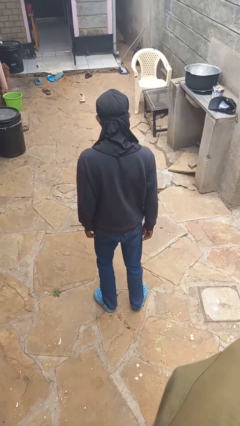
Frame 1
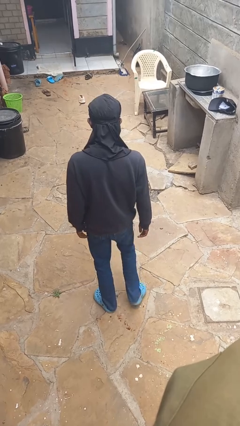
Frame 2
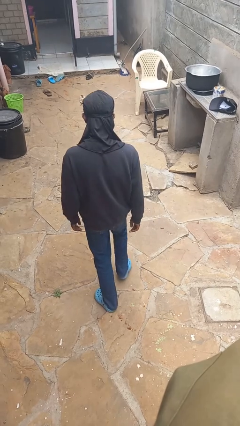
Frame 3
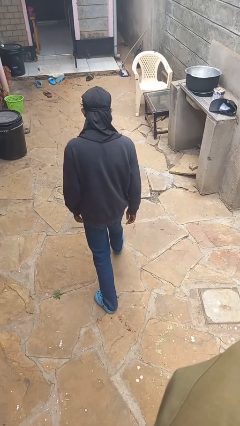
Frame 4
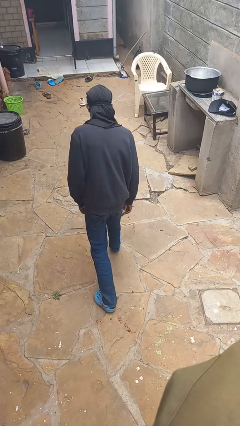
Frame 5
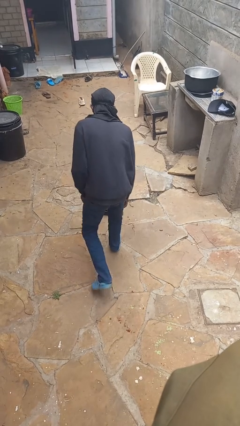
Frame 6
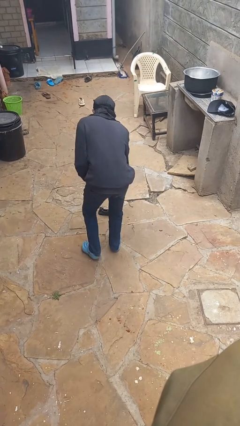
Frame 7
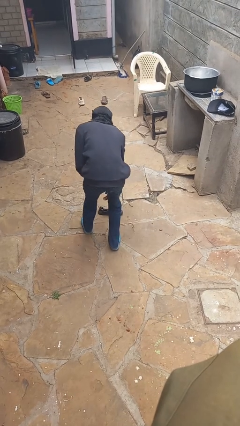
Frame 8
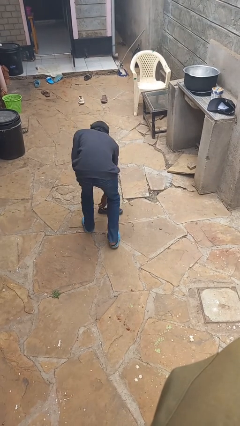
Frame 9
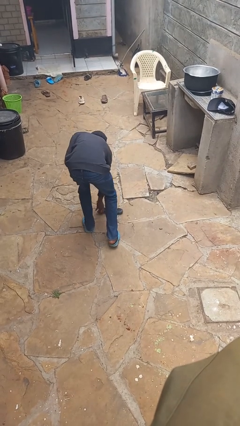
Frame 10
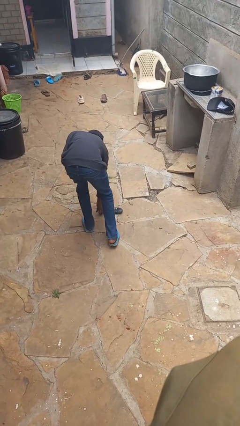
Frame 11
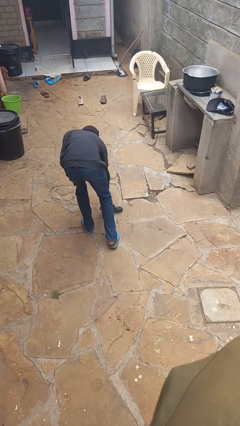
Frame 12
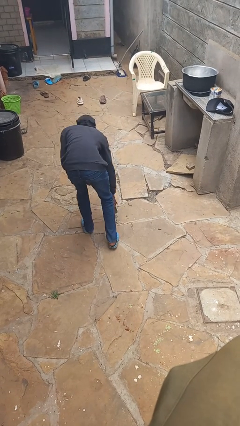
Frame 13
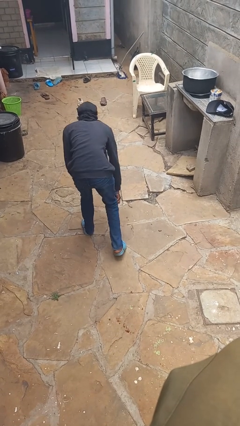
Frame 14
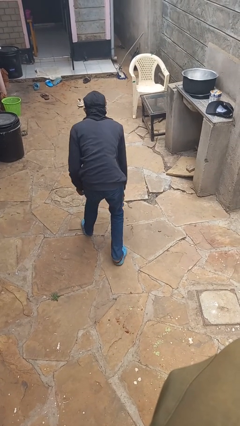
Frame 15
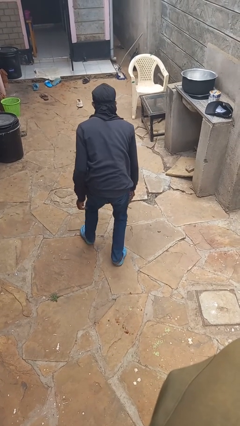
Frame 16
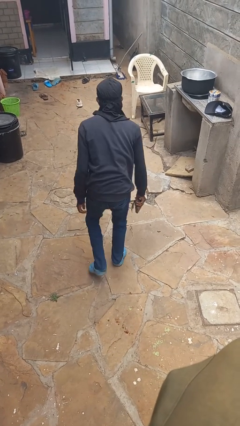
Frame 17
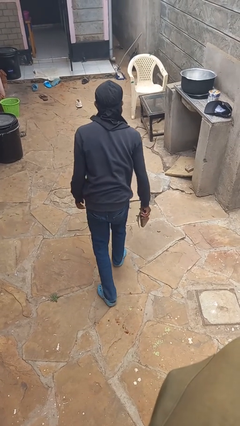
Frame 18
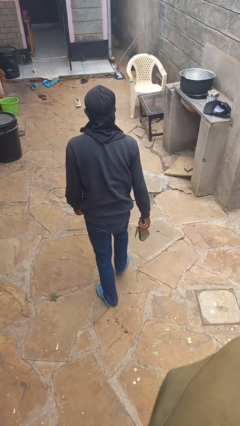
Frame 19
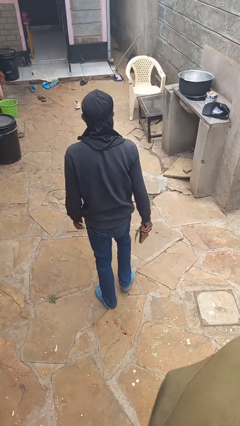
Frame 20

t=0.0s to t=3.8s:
person picks up object from floor

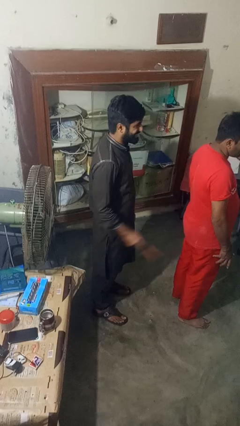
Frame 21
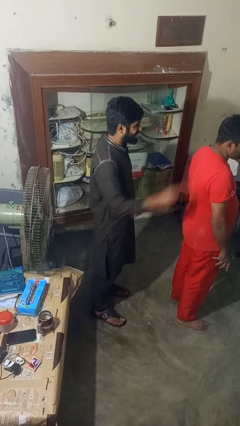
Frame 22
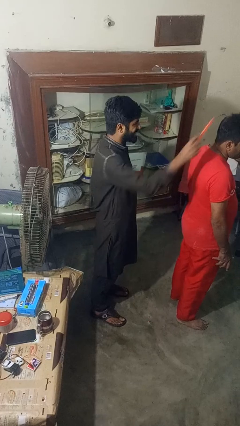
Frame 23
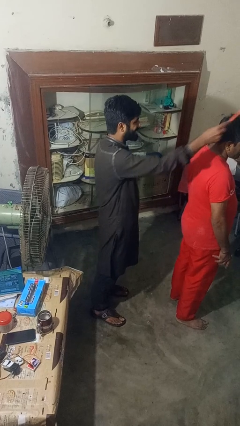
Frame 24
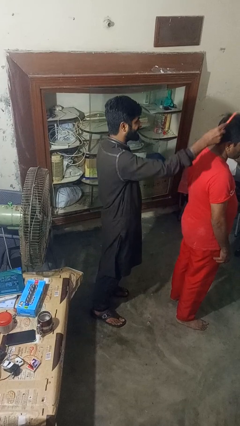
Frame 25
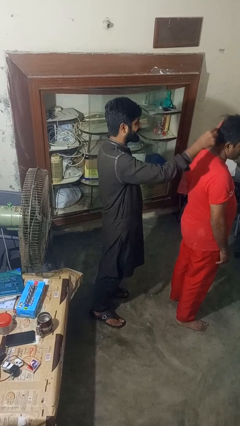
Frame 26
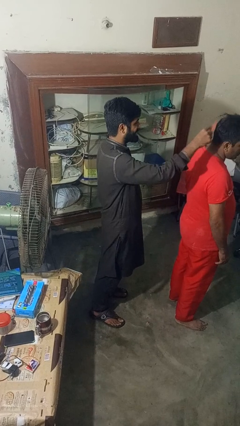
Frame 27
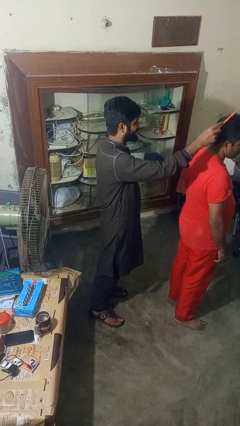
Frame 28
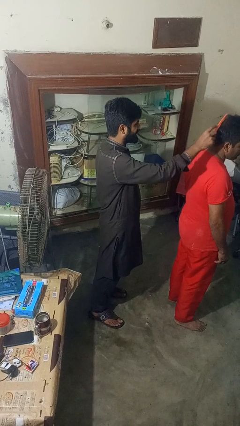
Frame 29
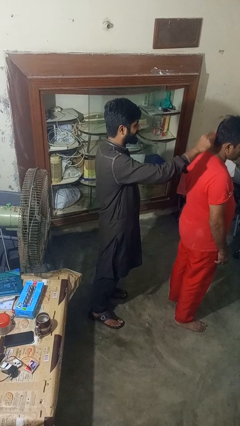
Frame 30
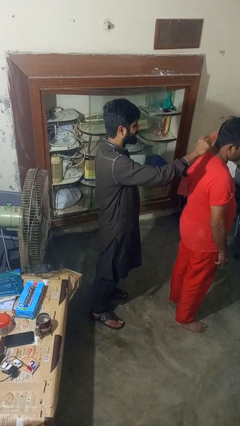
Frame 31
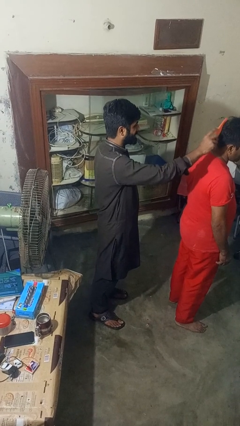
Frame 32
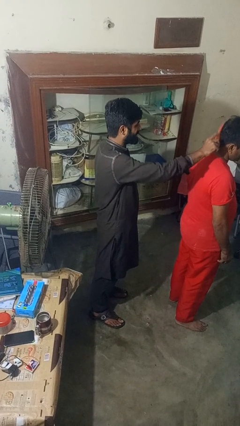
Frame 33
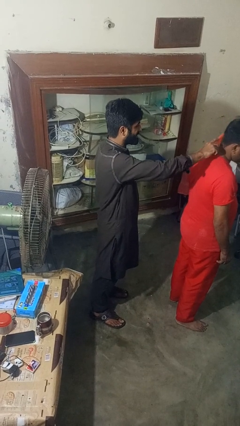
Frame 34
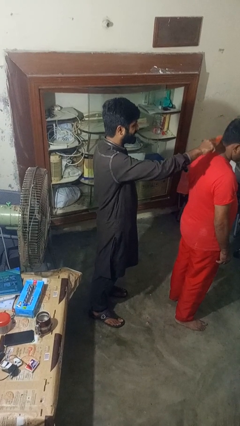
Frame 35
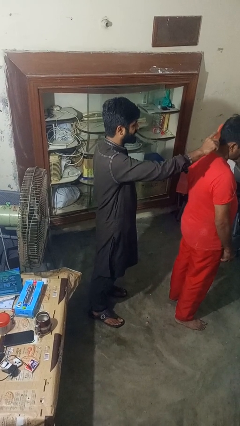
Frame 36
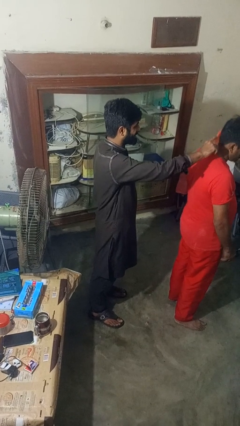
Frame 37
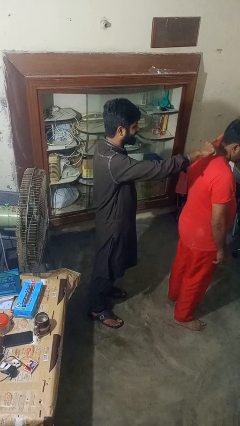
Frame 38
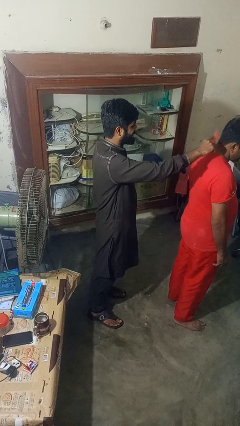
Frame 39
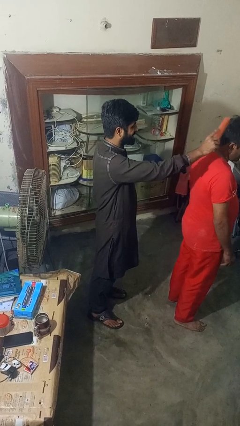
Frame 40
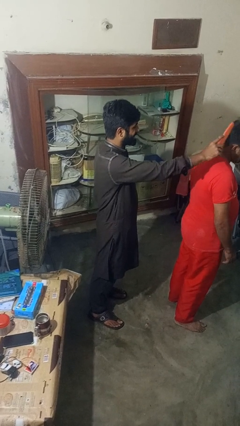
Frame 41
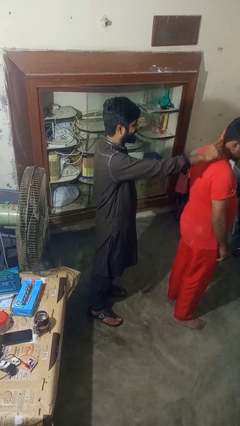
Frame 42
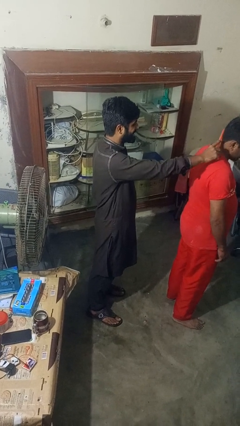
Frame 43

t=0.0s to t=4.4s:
person brushes hair of person

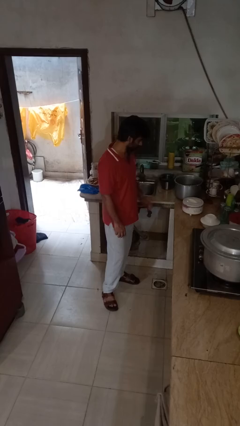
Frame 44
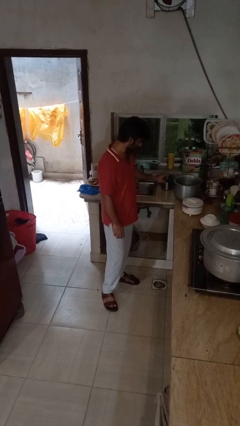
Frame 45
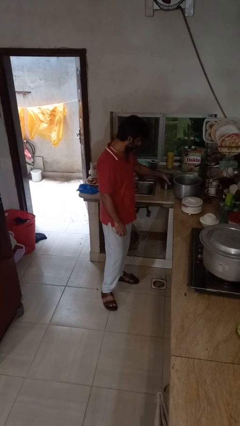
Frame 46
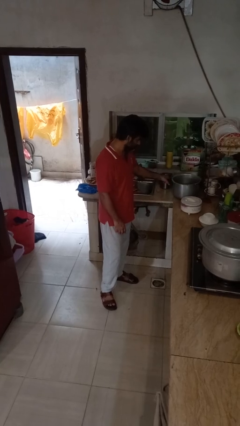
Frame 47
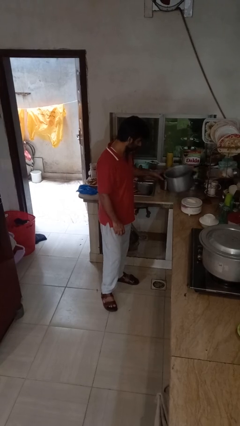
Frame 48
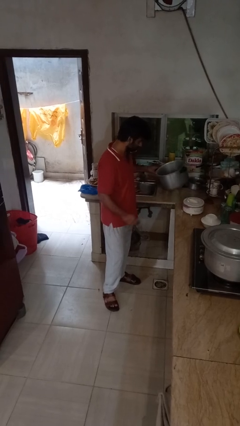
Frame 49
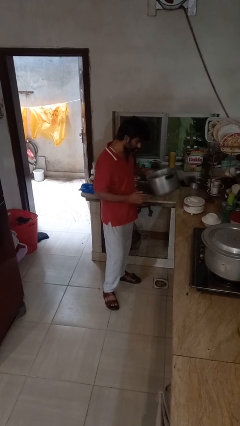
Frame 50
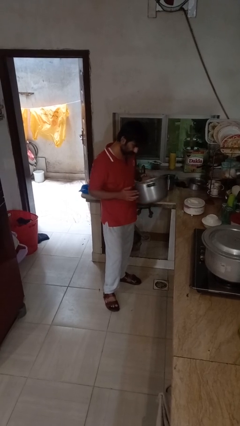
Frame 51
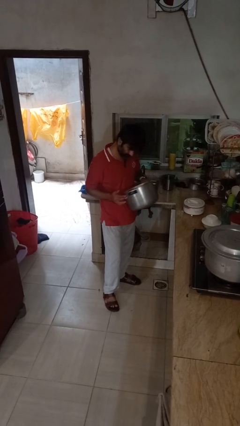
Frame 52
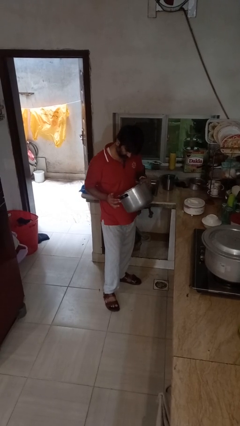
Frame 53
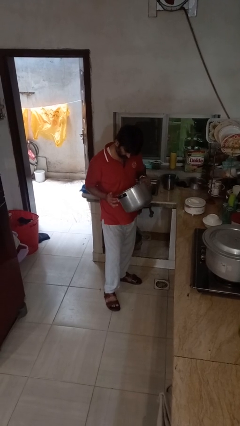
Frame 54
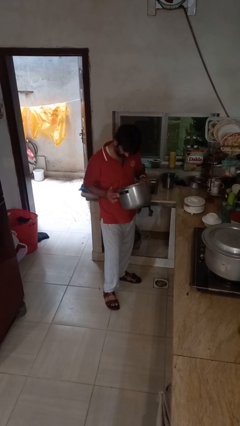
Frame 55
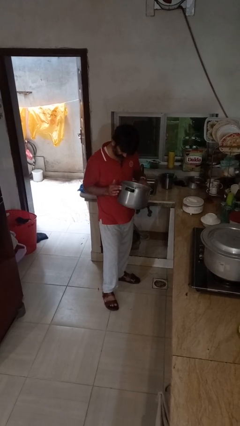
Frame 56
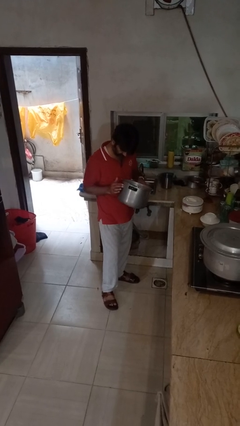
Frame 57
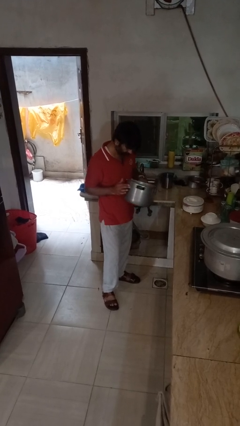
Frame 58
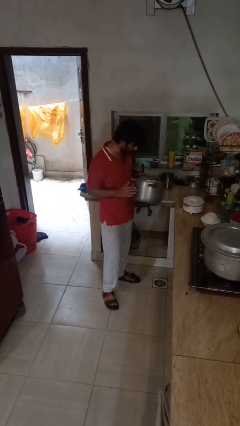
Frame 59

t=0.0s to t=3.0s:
person picks up object from countertop

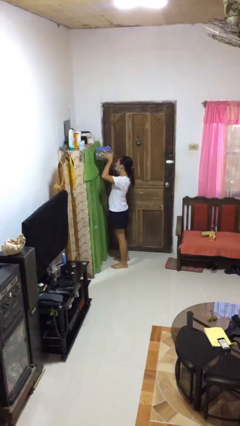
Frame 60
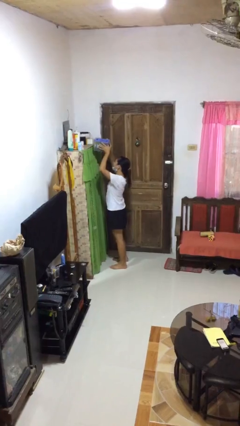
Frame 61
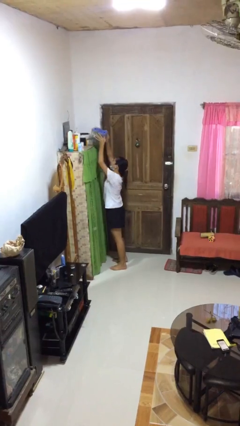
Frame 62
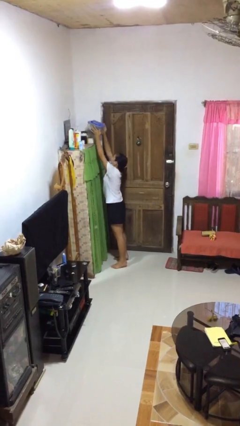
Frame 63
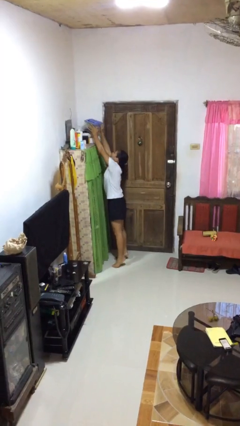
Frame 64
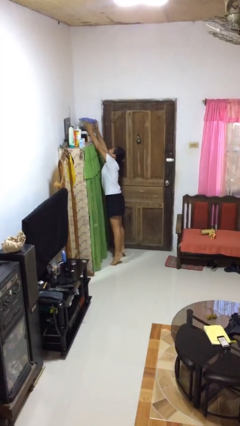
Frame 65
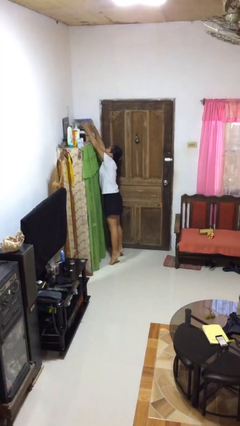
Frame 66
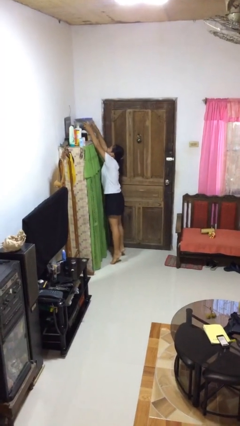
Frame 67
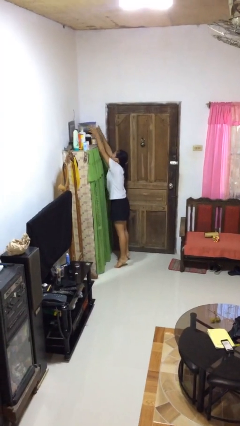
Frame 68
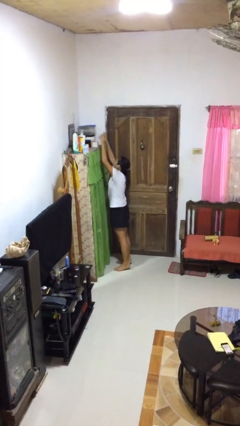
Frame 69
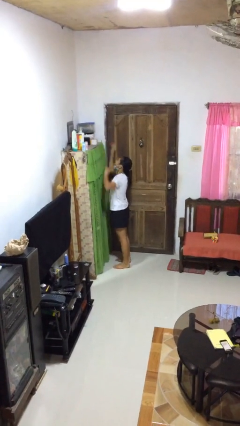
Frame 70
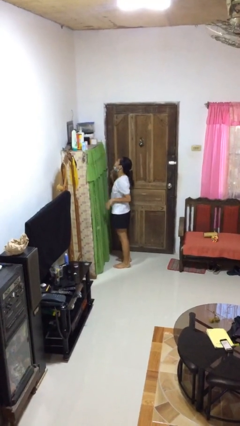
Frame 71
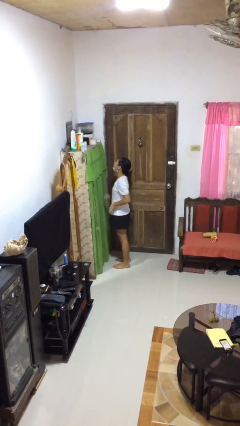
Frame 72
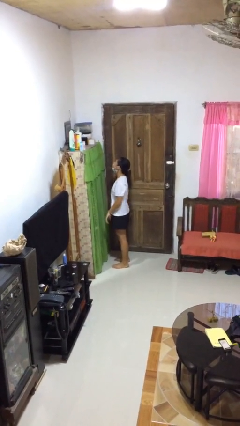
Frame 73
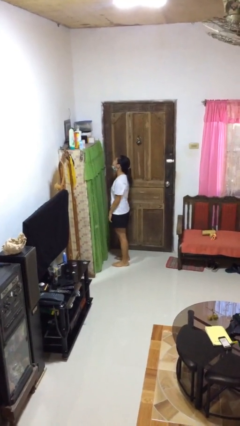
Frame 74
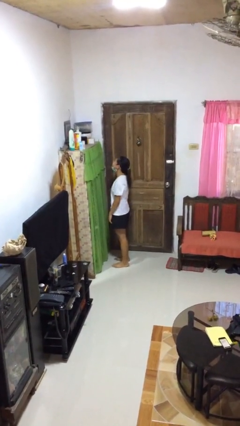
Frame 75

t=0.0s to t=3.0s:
person puts down object on shelf

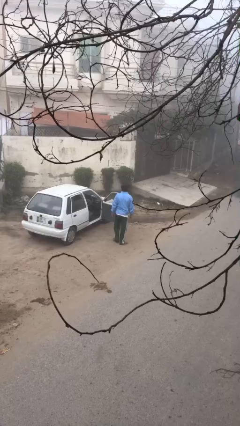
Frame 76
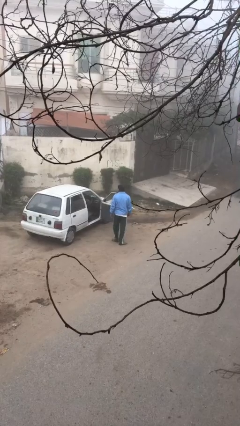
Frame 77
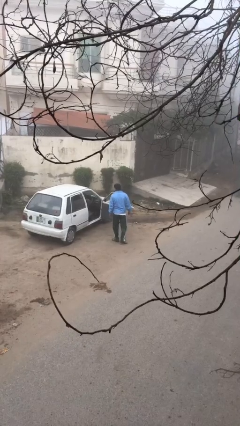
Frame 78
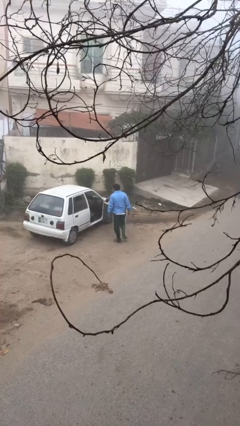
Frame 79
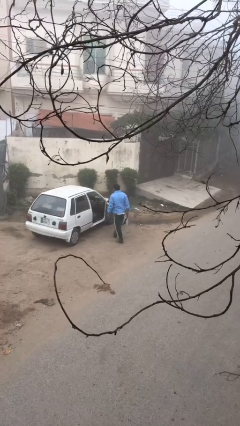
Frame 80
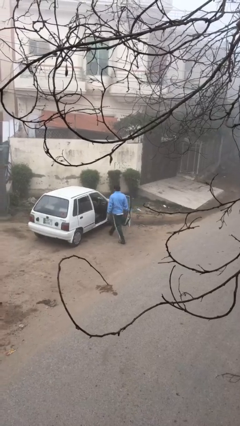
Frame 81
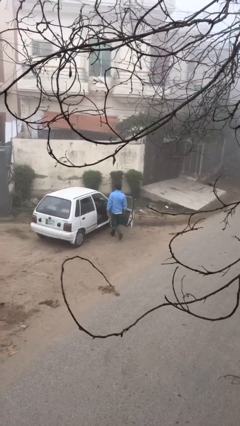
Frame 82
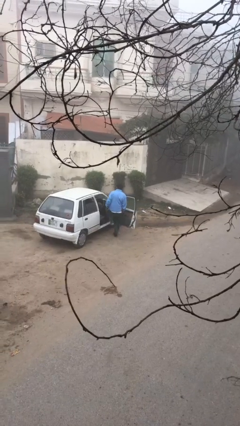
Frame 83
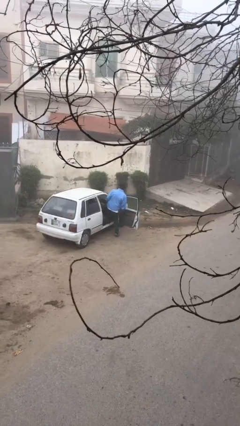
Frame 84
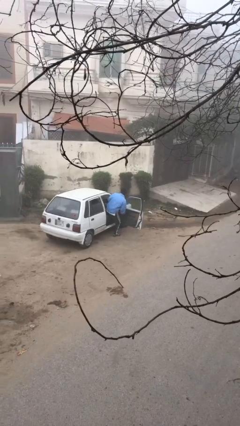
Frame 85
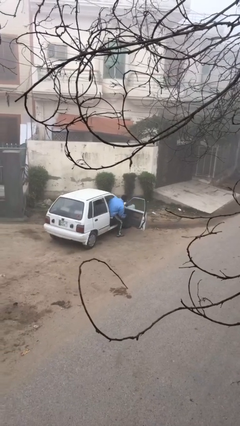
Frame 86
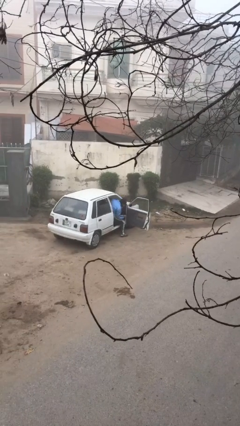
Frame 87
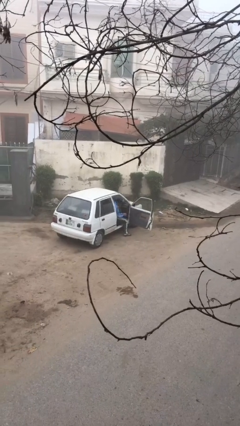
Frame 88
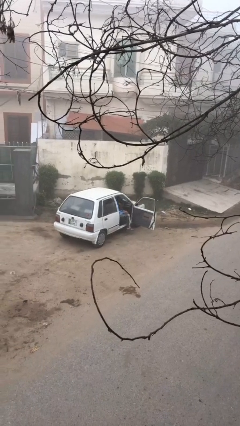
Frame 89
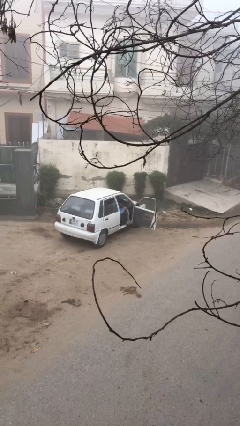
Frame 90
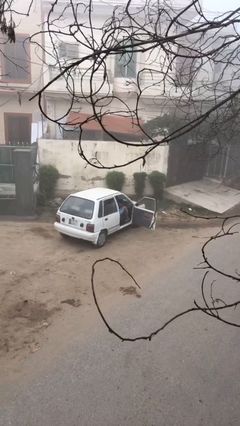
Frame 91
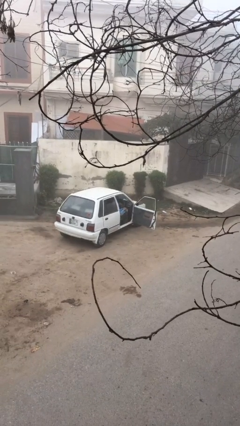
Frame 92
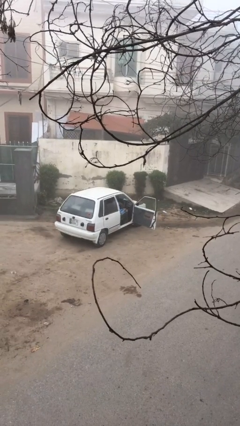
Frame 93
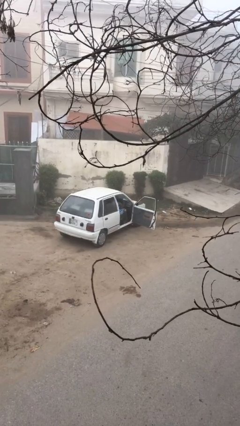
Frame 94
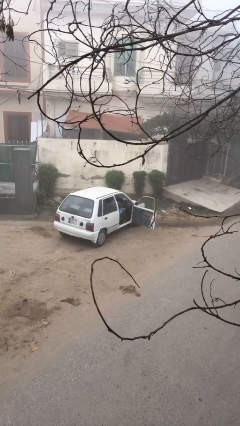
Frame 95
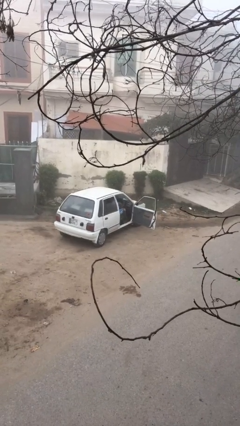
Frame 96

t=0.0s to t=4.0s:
person enters car
